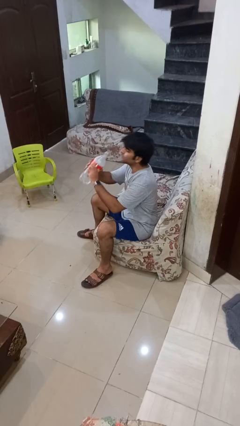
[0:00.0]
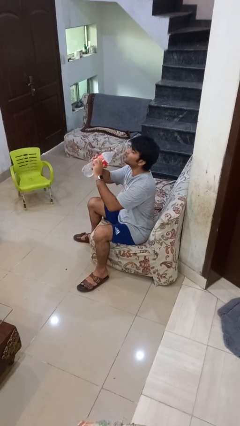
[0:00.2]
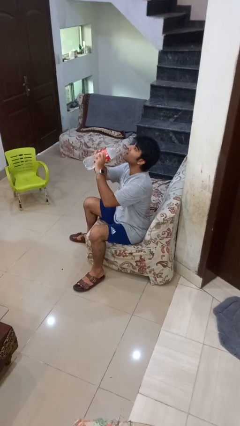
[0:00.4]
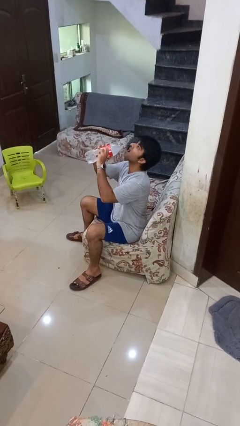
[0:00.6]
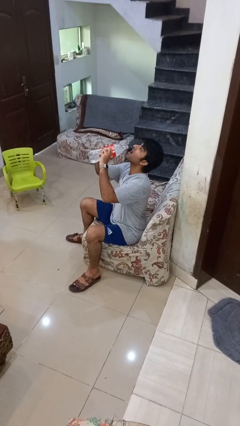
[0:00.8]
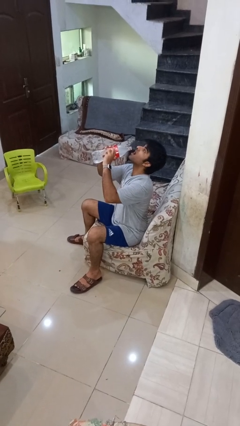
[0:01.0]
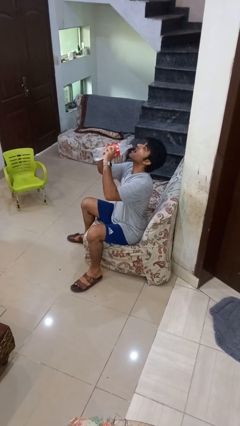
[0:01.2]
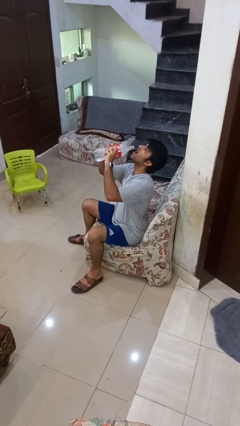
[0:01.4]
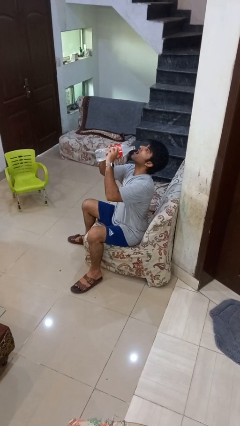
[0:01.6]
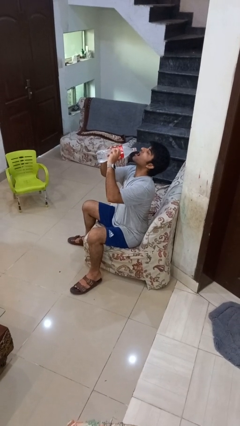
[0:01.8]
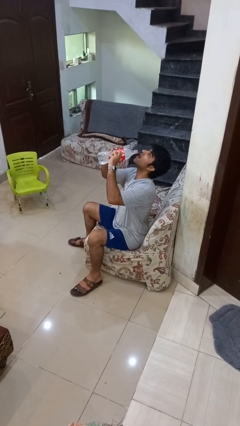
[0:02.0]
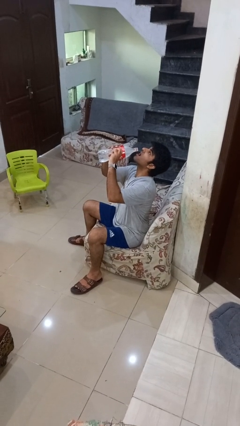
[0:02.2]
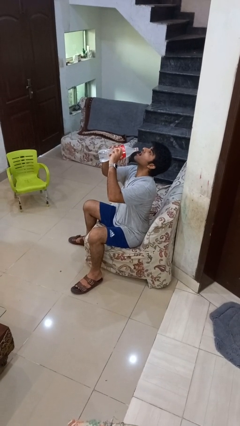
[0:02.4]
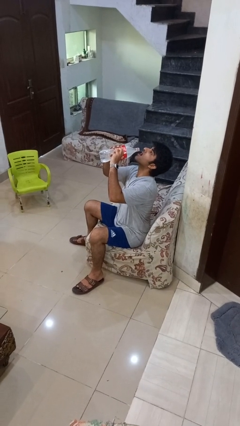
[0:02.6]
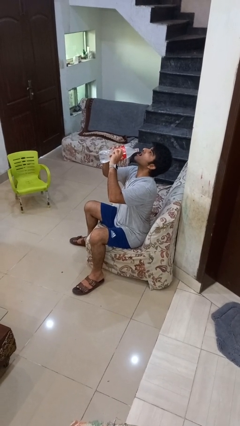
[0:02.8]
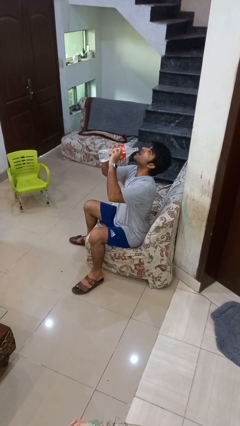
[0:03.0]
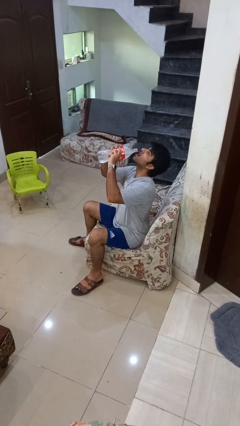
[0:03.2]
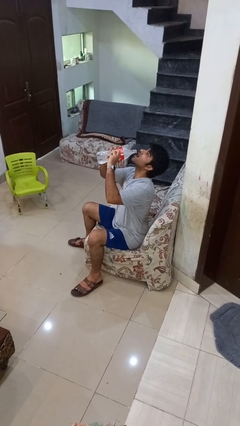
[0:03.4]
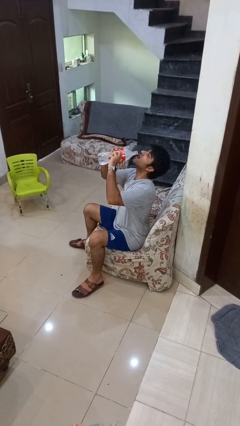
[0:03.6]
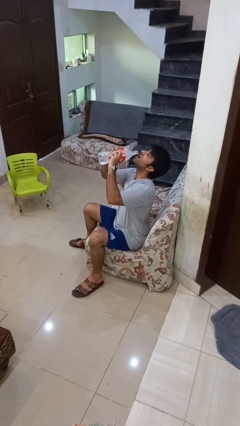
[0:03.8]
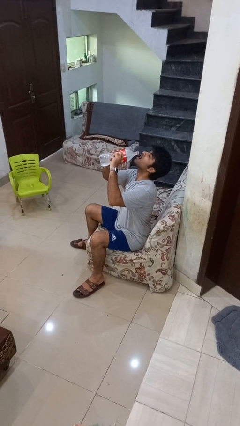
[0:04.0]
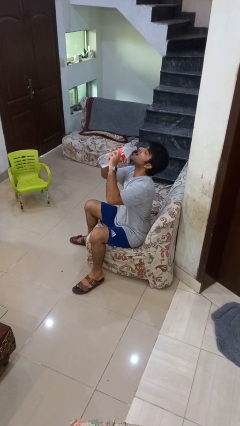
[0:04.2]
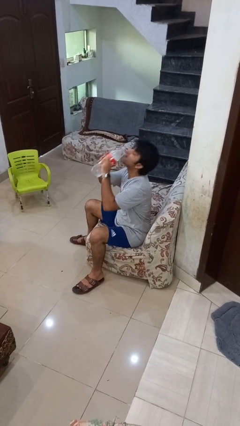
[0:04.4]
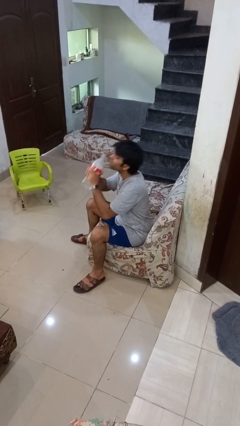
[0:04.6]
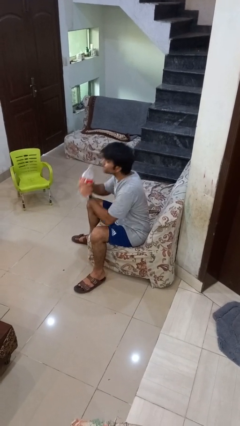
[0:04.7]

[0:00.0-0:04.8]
person drinks from bottle

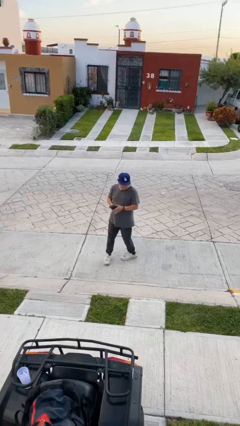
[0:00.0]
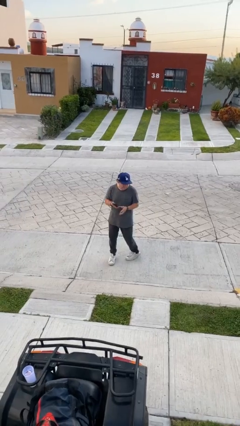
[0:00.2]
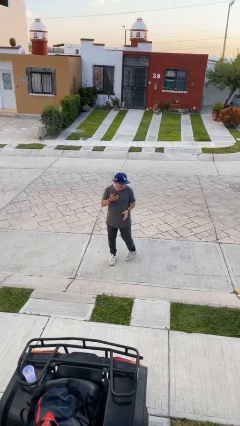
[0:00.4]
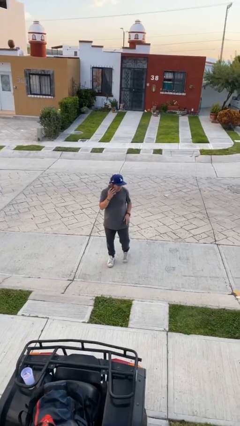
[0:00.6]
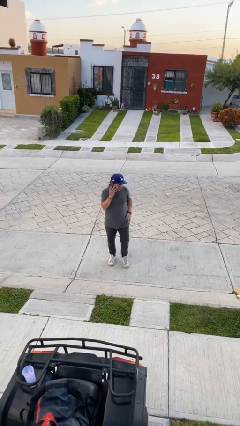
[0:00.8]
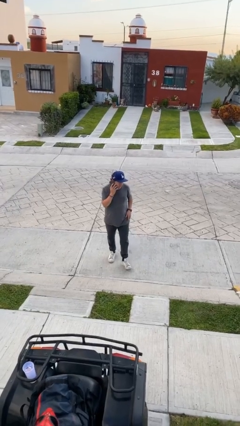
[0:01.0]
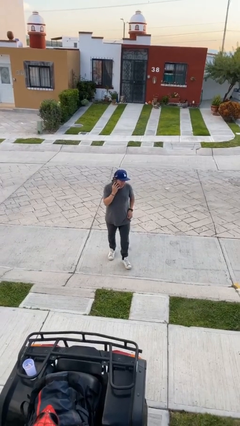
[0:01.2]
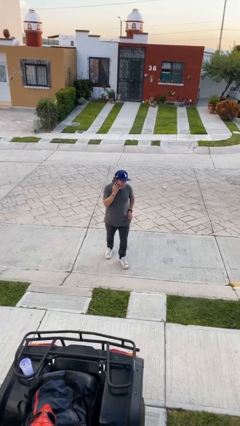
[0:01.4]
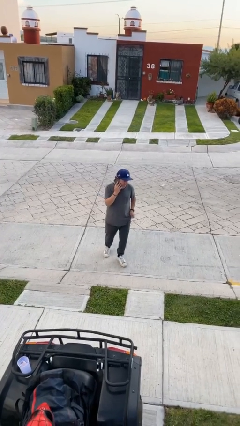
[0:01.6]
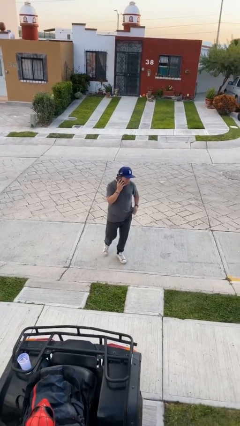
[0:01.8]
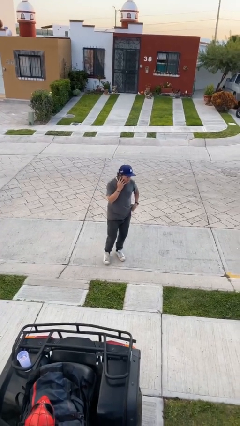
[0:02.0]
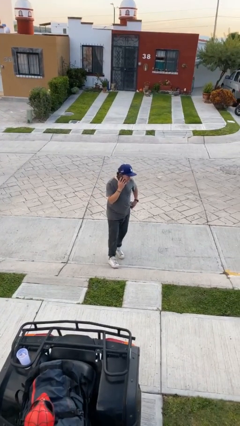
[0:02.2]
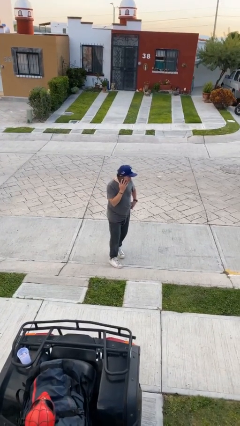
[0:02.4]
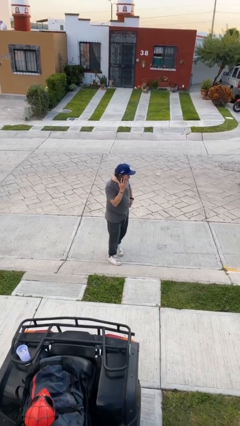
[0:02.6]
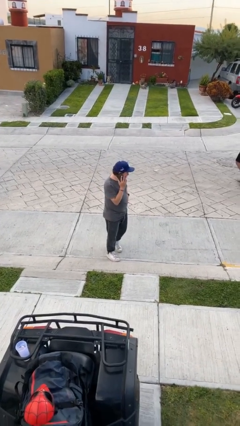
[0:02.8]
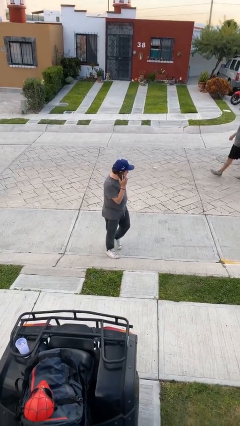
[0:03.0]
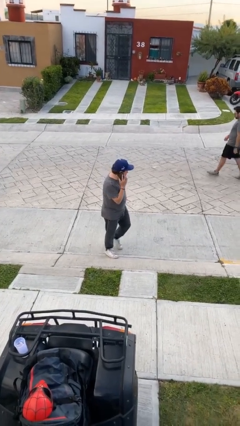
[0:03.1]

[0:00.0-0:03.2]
person talks on phone

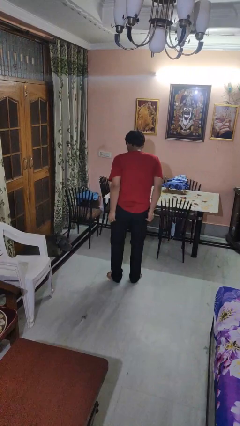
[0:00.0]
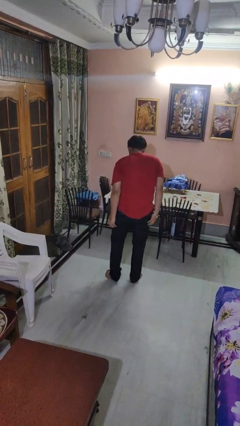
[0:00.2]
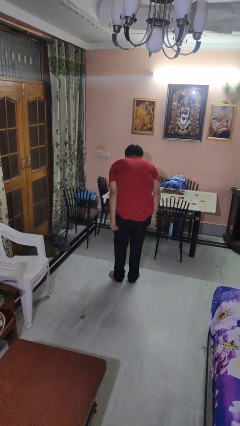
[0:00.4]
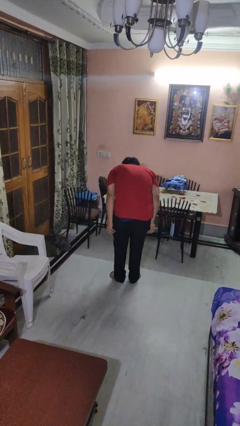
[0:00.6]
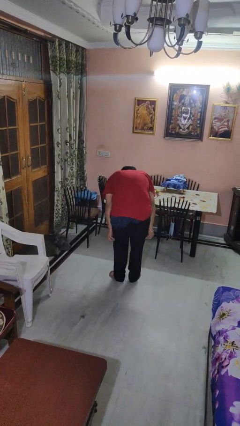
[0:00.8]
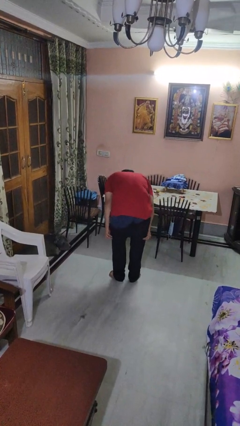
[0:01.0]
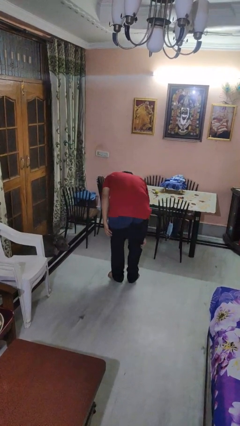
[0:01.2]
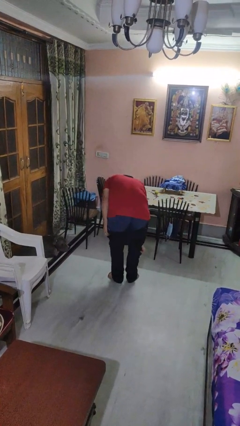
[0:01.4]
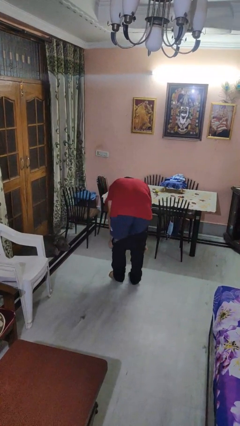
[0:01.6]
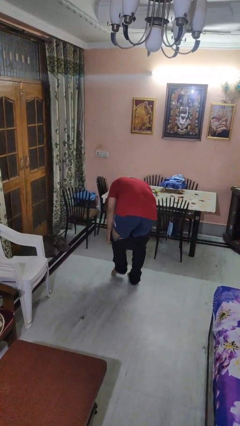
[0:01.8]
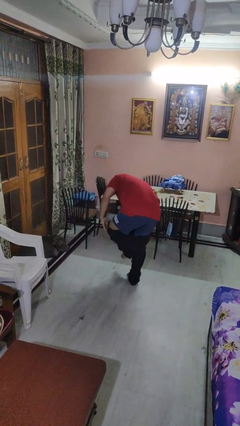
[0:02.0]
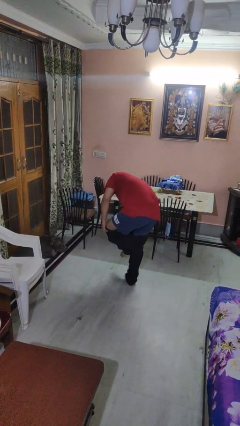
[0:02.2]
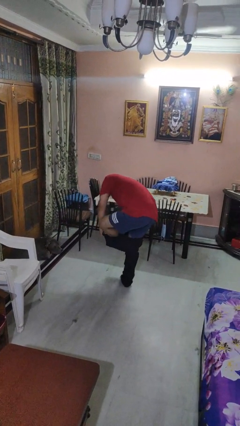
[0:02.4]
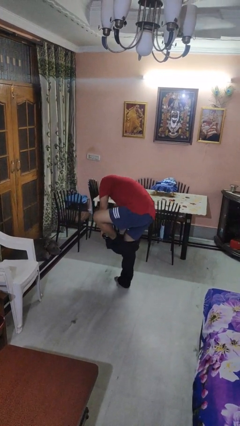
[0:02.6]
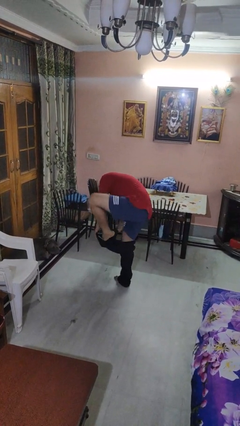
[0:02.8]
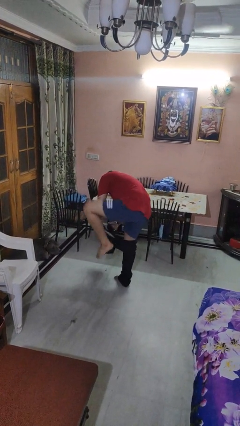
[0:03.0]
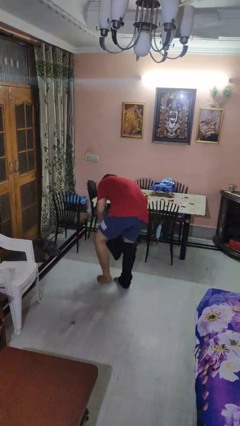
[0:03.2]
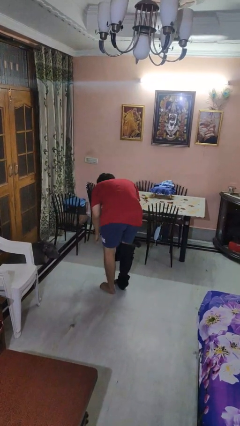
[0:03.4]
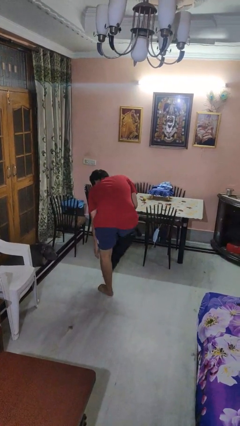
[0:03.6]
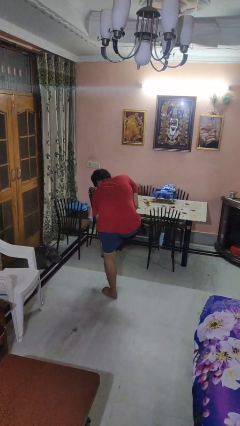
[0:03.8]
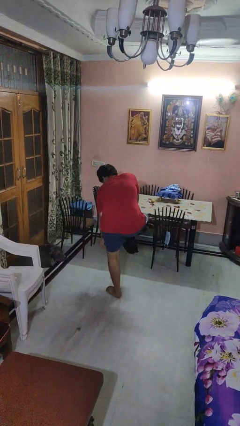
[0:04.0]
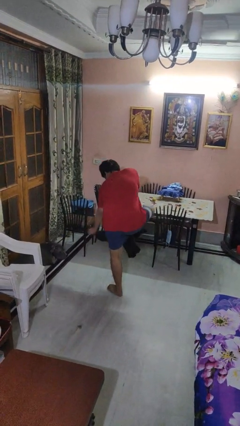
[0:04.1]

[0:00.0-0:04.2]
person takes off pants

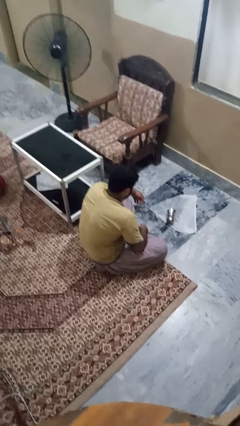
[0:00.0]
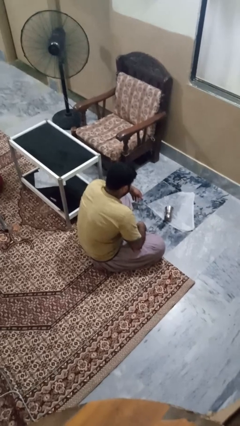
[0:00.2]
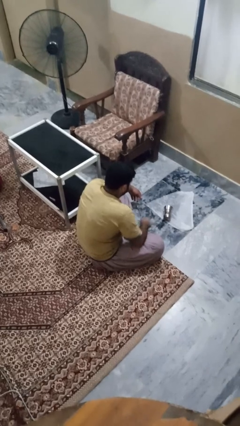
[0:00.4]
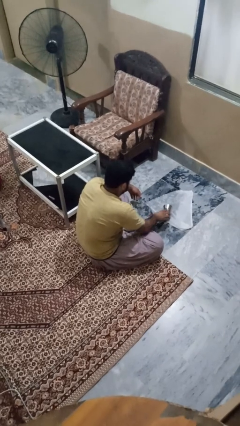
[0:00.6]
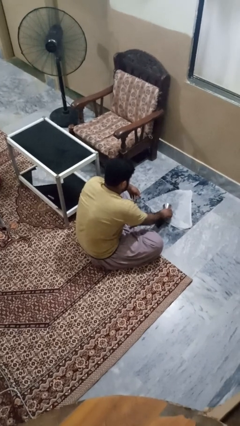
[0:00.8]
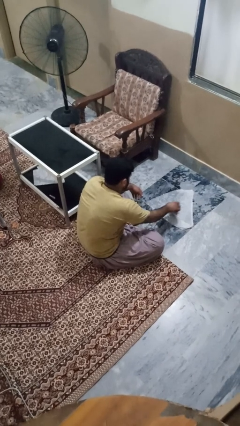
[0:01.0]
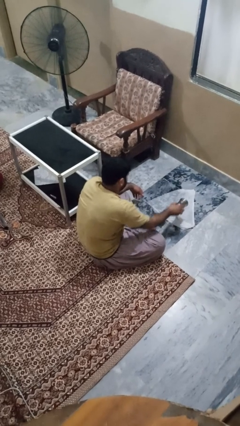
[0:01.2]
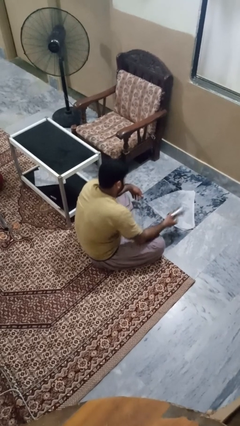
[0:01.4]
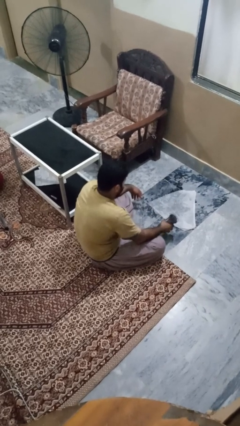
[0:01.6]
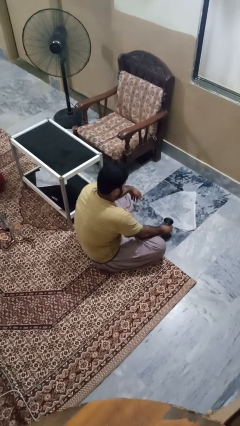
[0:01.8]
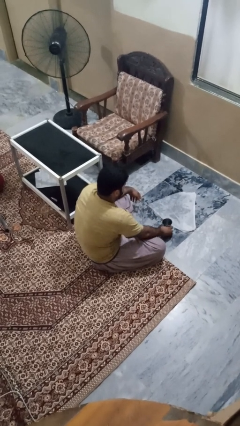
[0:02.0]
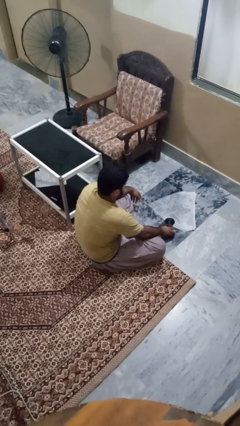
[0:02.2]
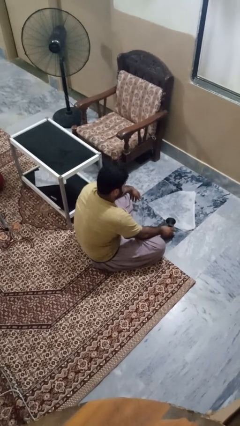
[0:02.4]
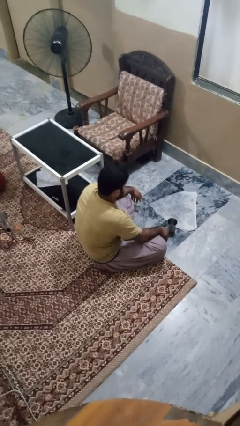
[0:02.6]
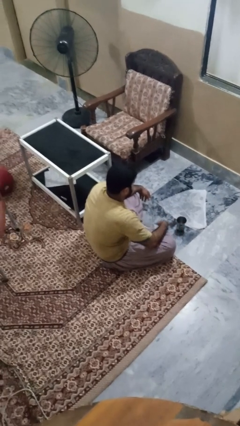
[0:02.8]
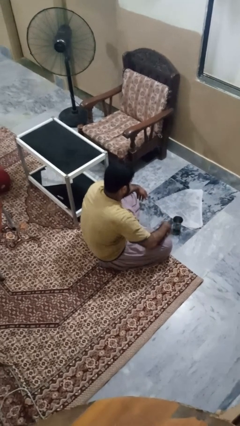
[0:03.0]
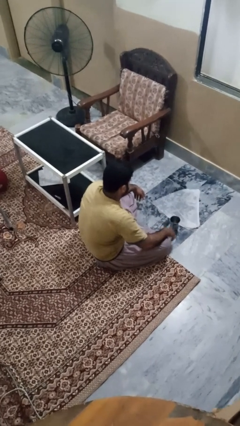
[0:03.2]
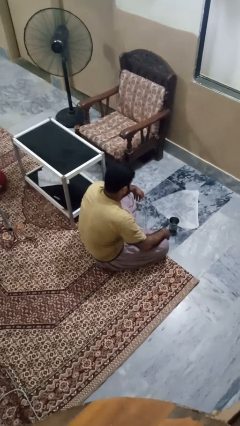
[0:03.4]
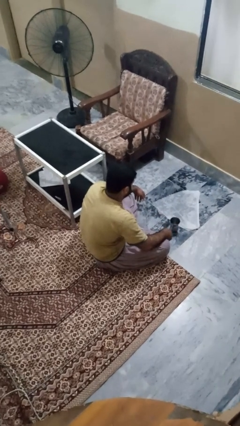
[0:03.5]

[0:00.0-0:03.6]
person sets upright glass

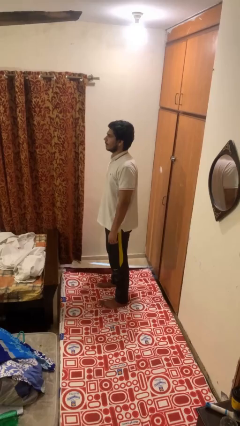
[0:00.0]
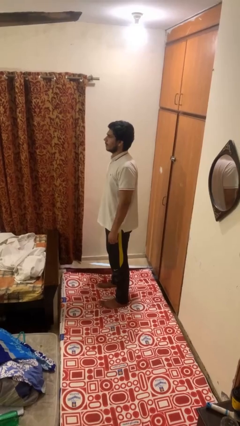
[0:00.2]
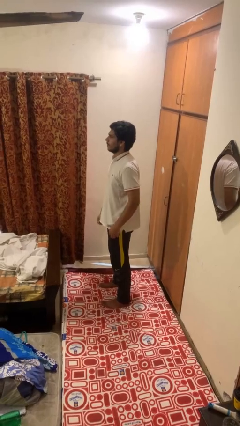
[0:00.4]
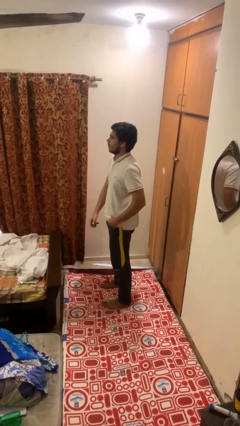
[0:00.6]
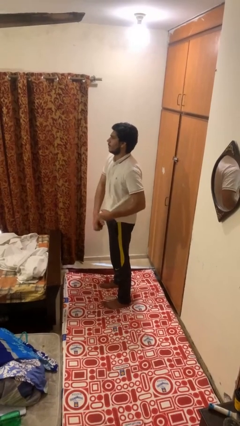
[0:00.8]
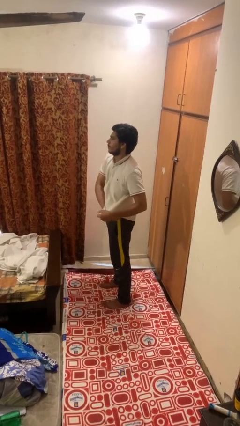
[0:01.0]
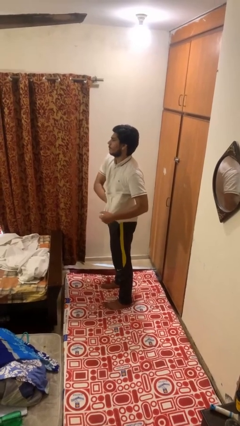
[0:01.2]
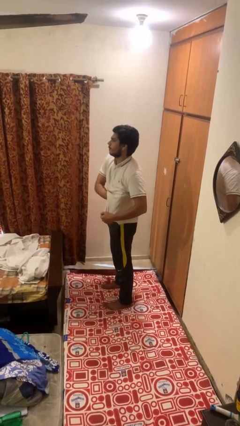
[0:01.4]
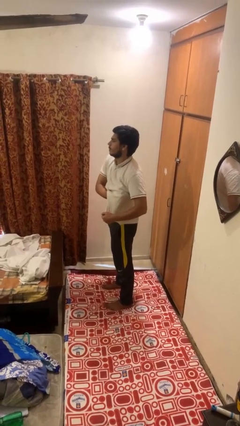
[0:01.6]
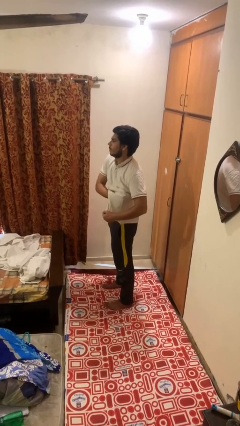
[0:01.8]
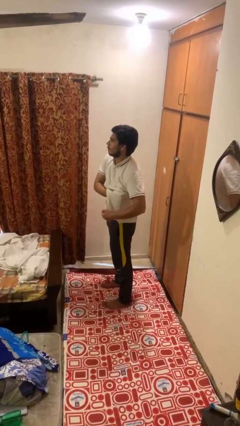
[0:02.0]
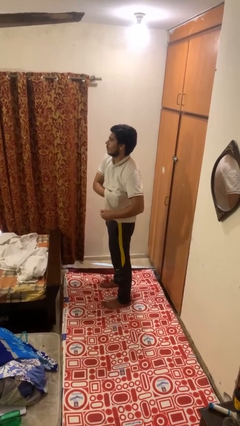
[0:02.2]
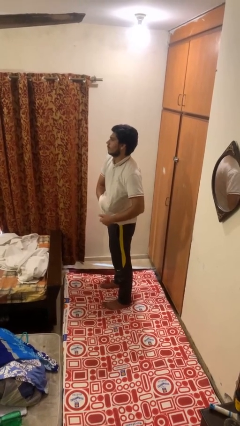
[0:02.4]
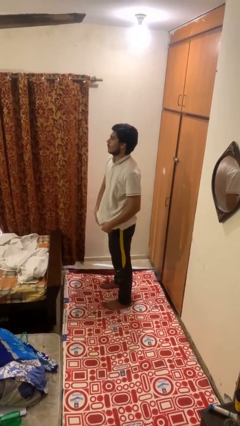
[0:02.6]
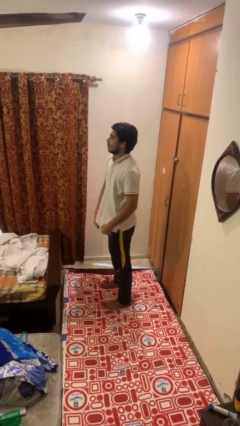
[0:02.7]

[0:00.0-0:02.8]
person applies deodorant
